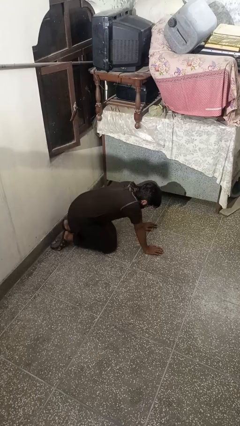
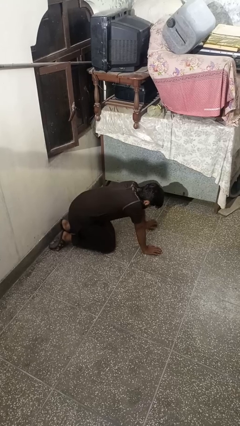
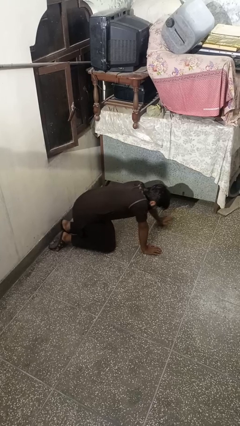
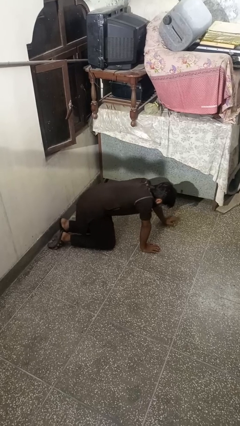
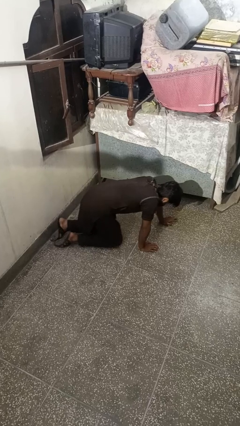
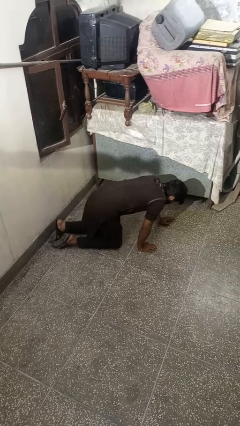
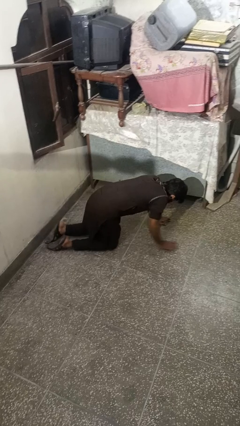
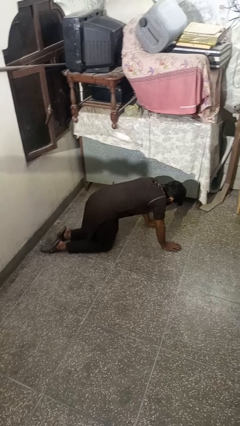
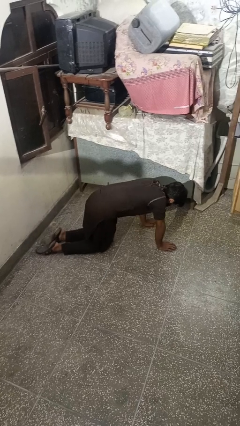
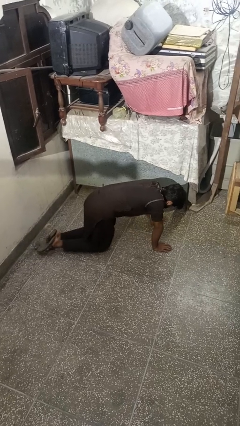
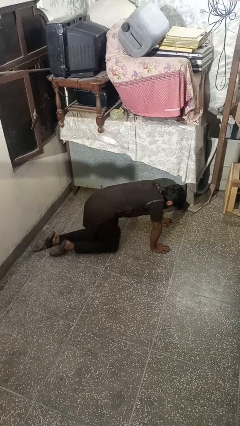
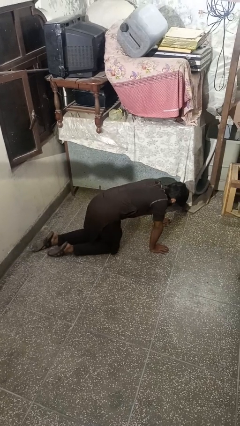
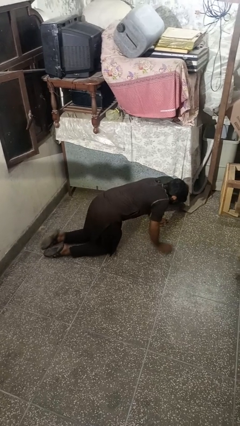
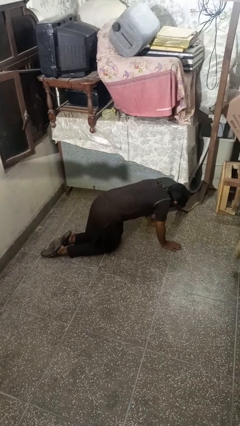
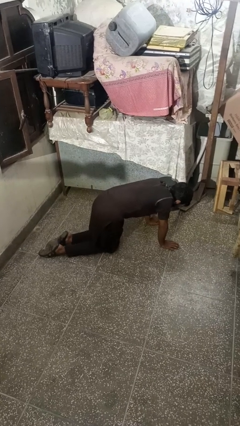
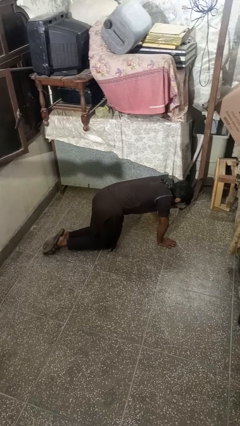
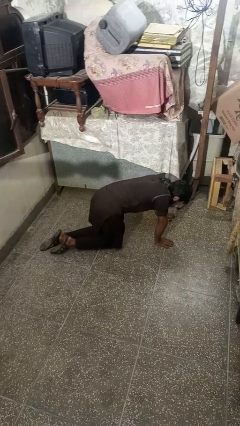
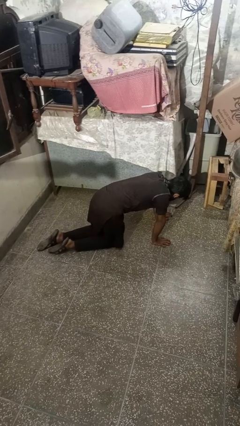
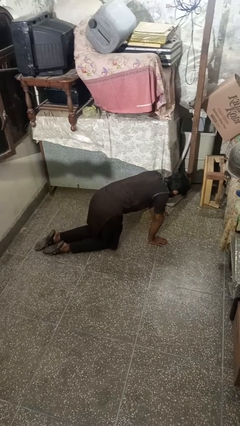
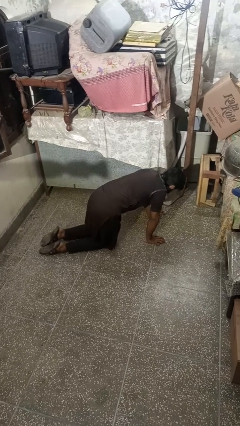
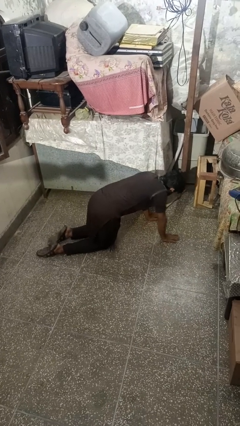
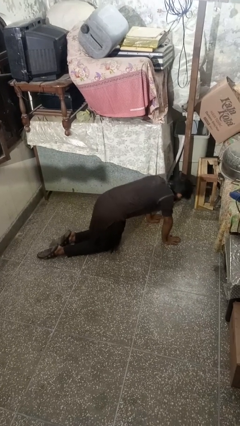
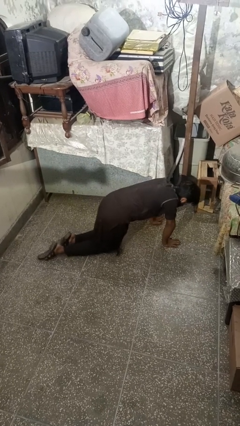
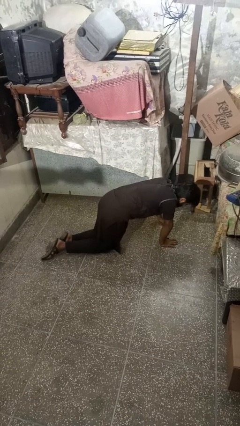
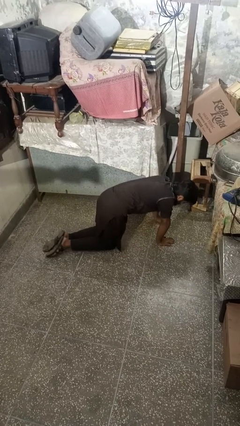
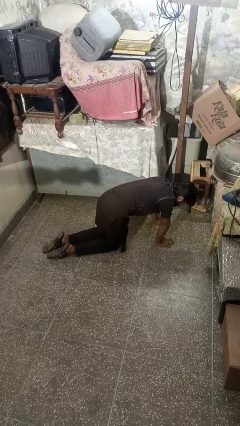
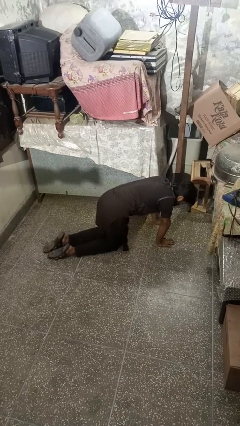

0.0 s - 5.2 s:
person crawls

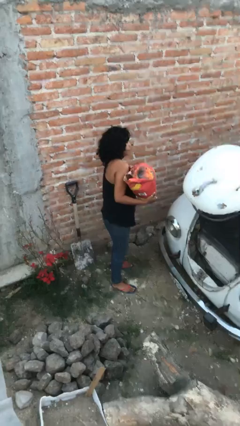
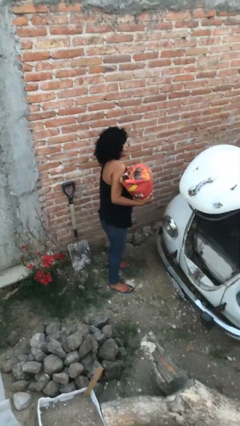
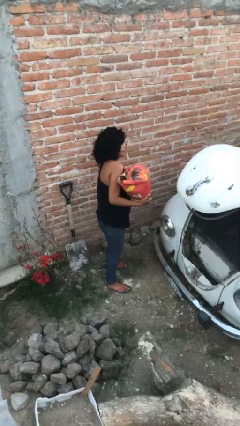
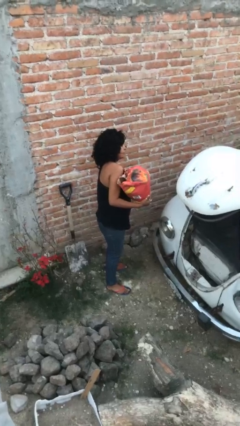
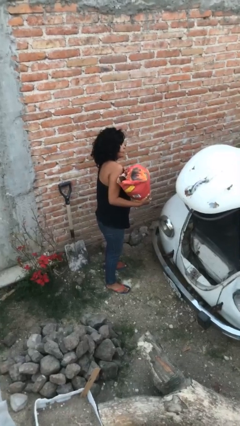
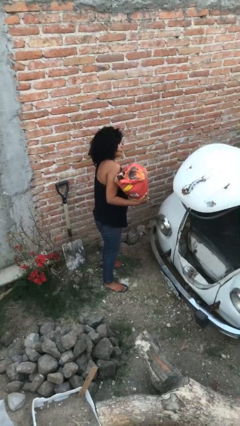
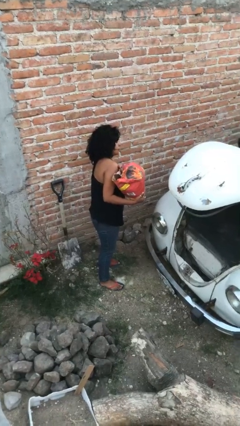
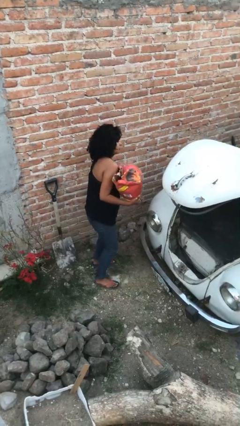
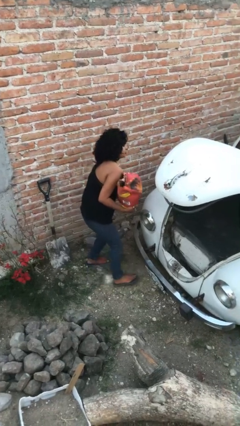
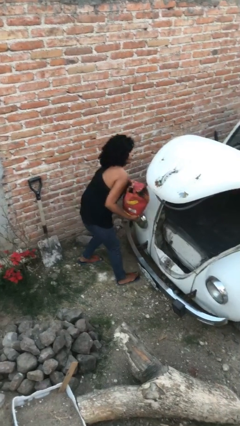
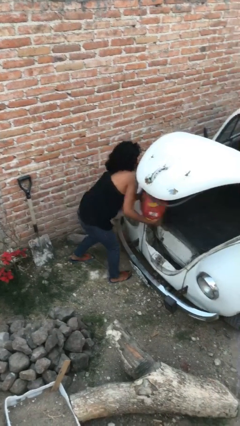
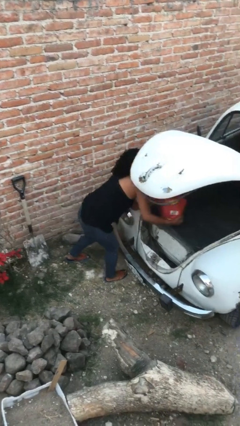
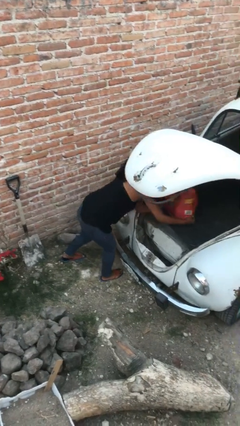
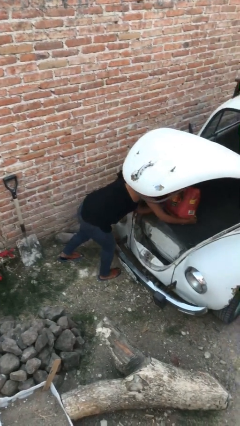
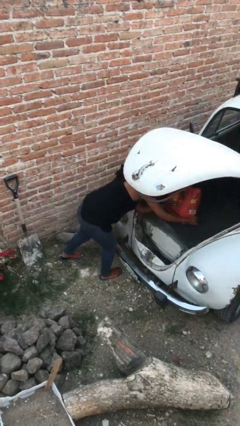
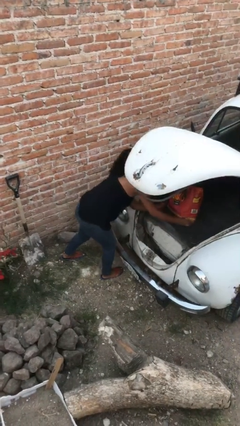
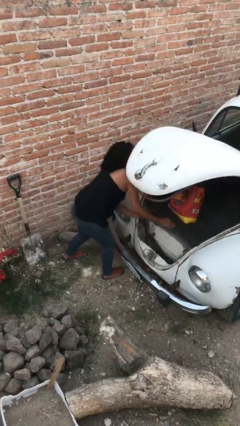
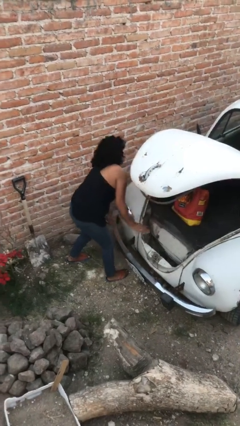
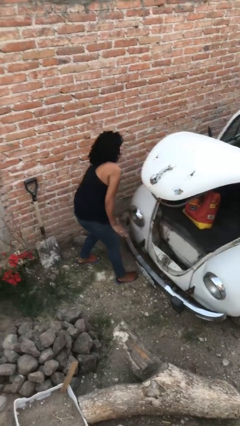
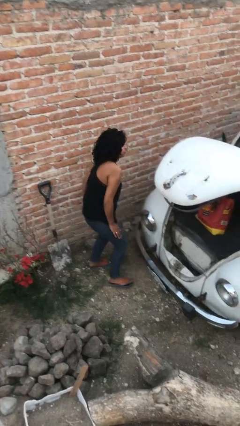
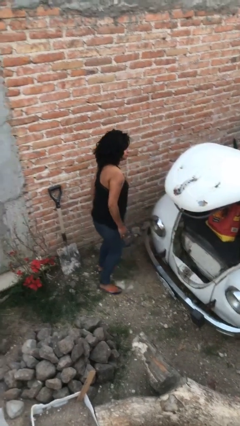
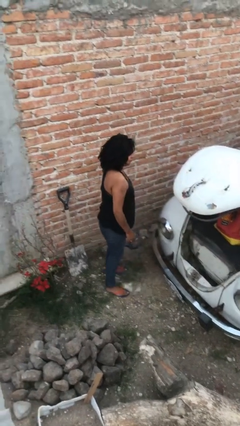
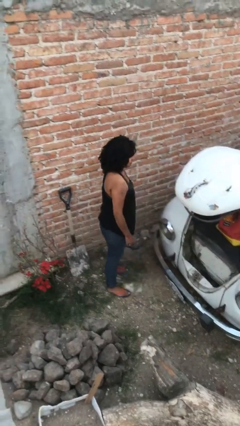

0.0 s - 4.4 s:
person loads car

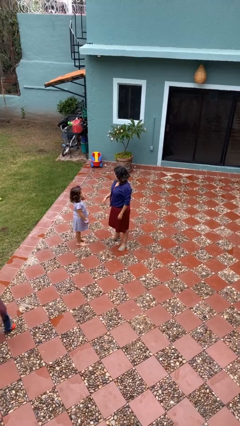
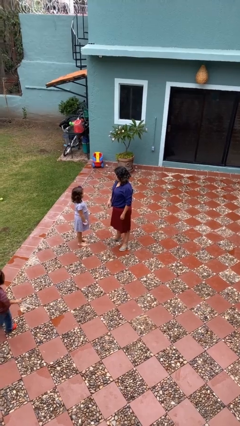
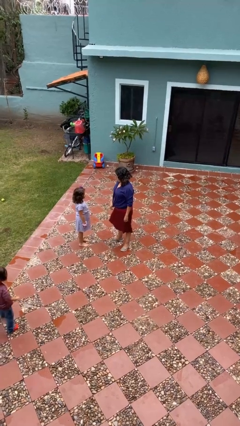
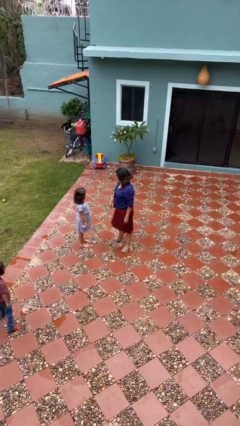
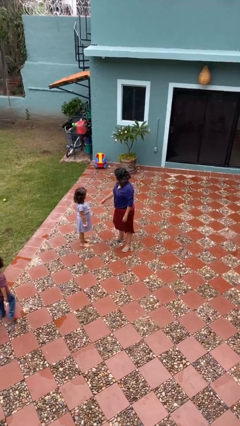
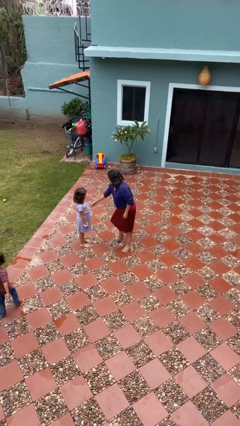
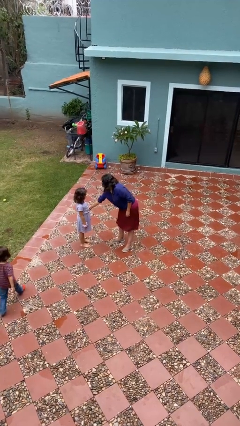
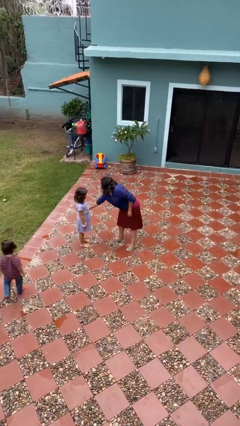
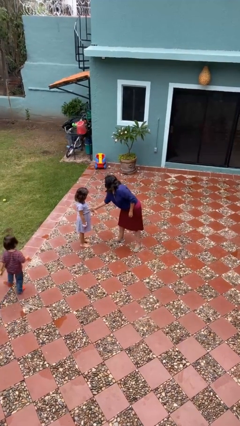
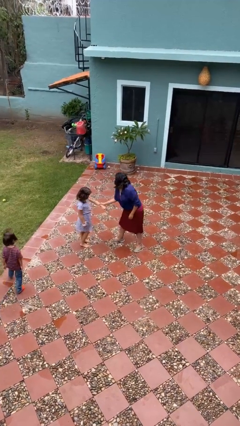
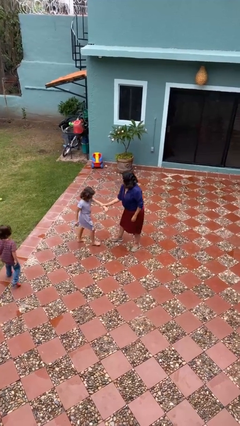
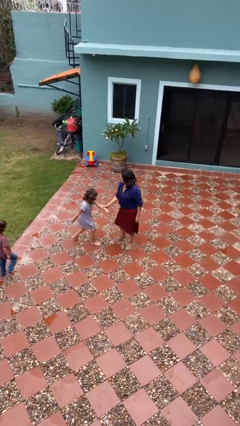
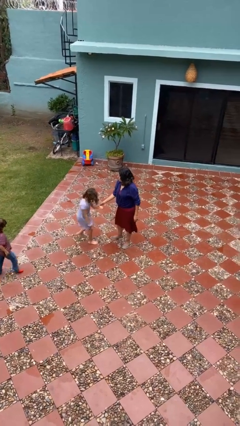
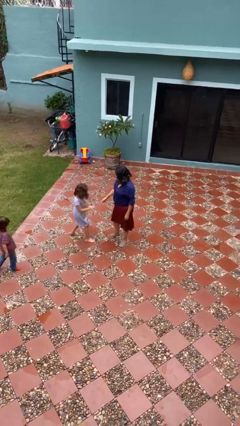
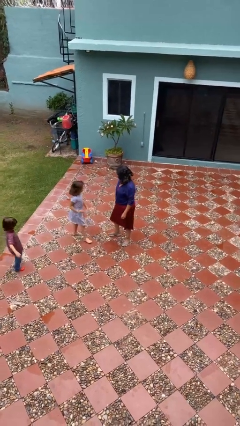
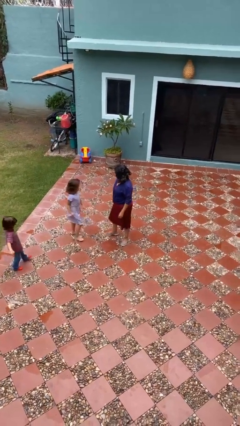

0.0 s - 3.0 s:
person grabs person by forearm

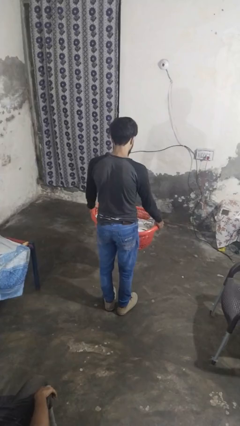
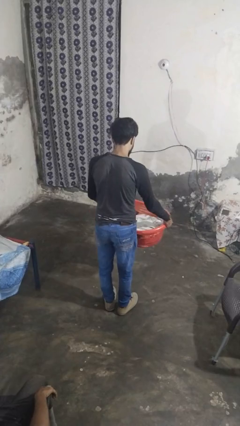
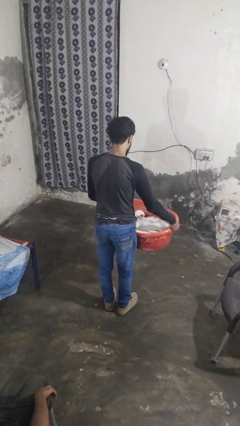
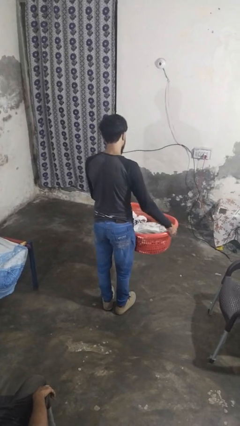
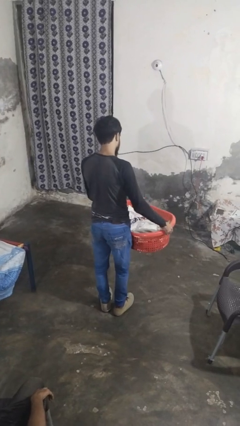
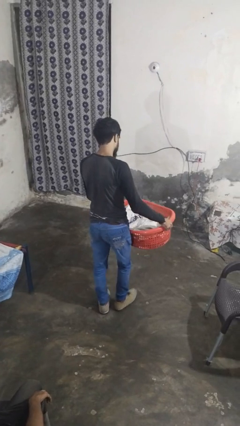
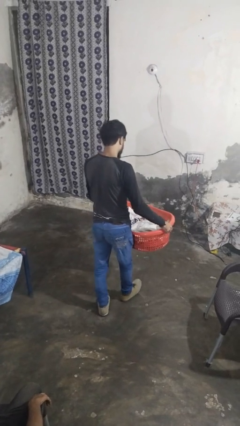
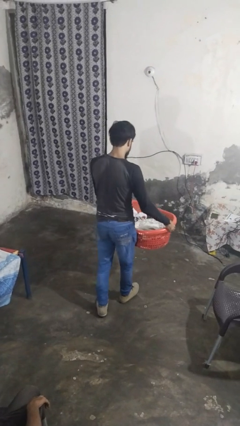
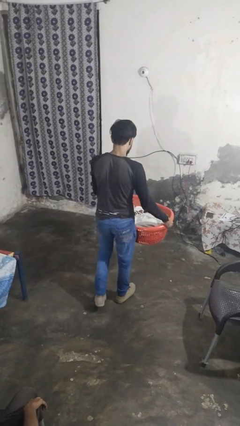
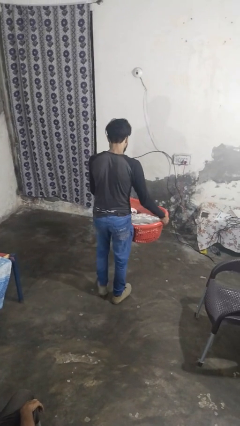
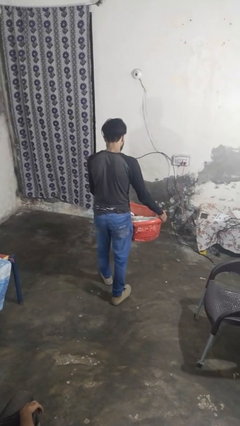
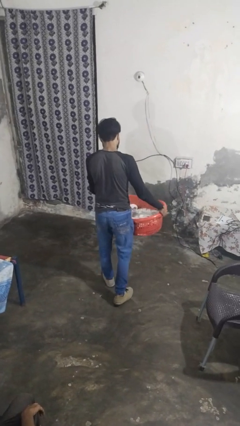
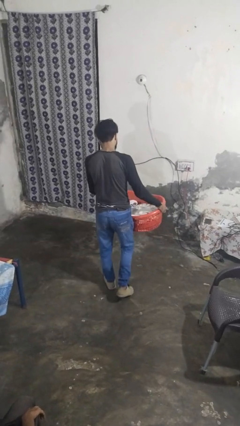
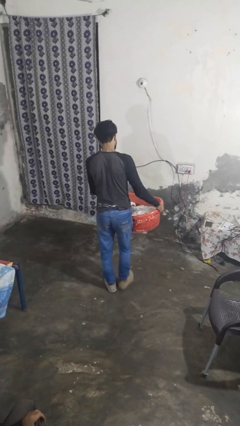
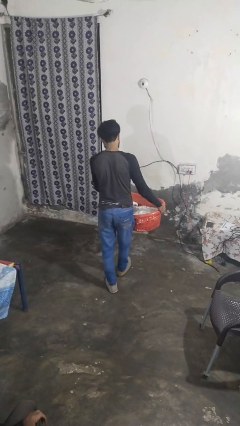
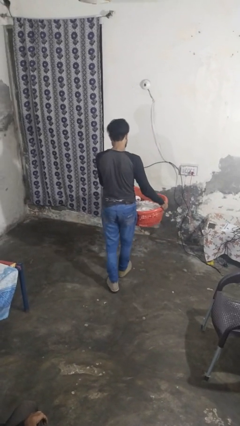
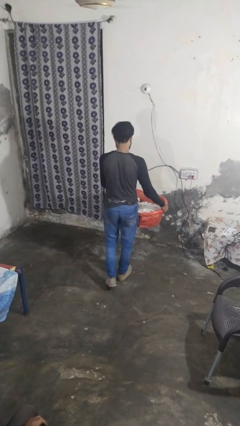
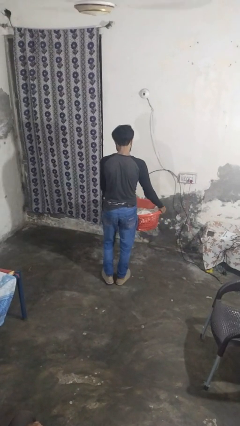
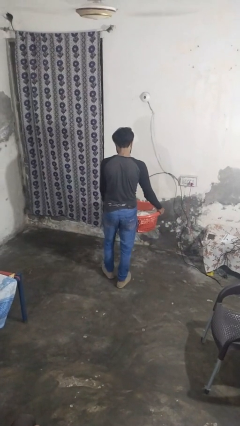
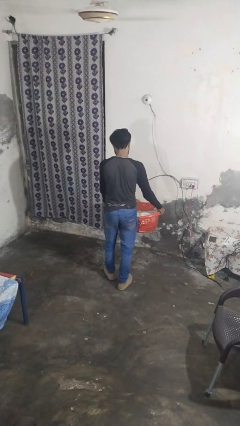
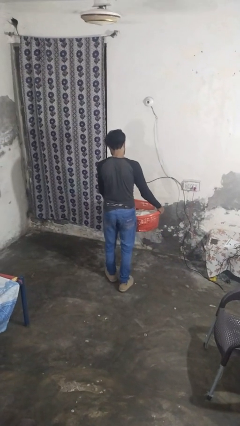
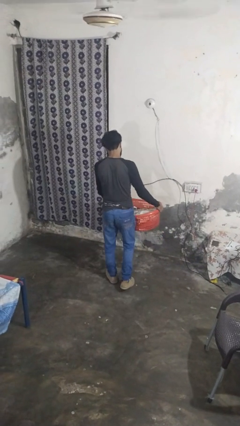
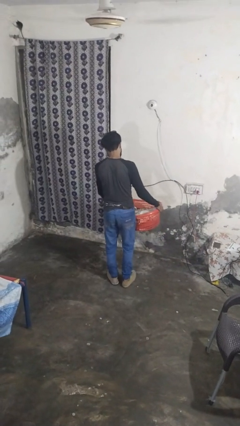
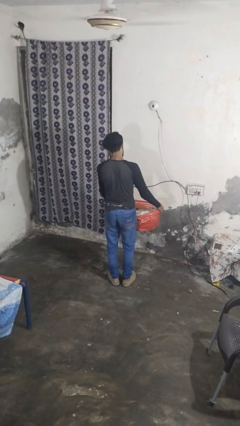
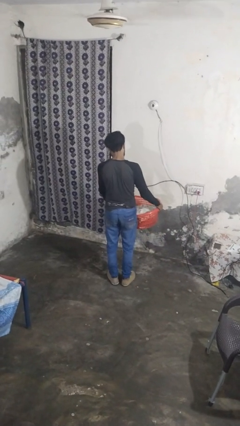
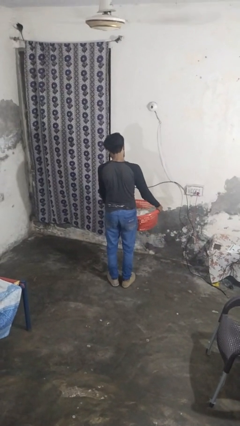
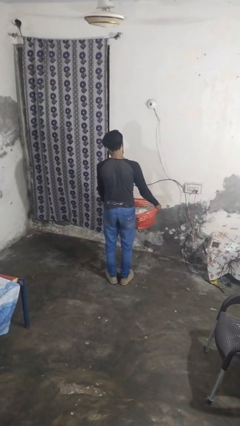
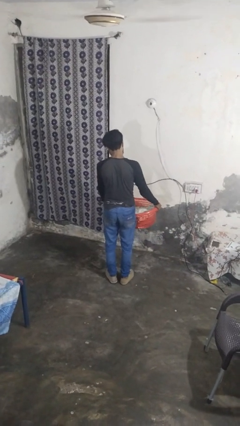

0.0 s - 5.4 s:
person carries laundry basket
